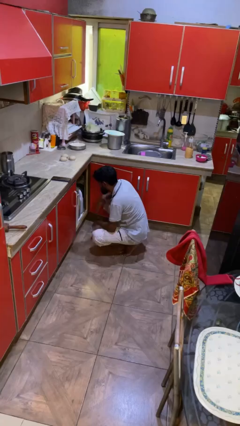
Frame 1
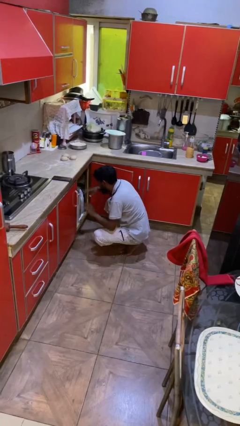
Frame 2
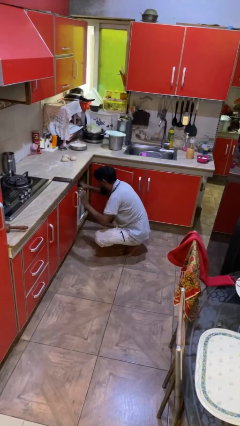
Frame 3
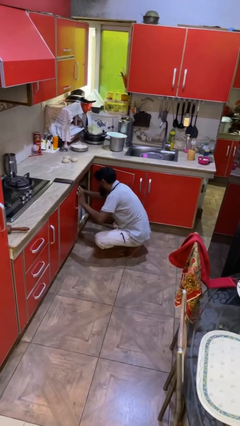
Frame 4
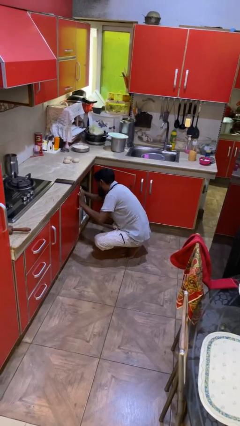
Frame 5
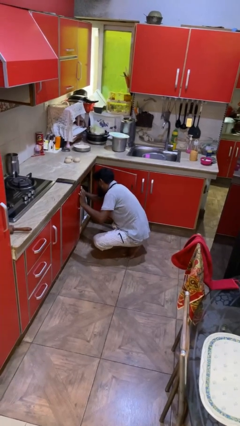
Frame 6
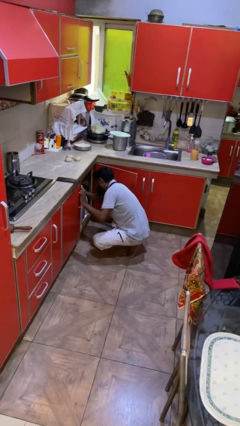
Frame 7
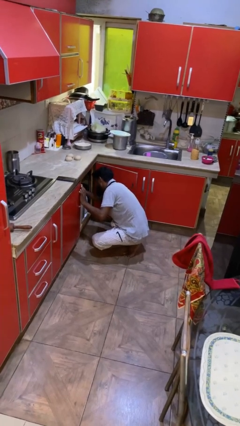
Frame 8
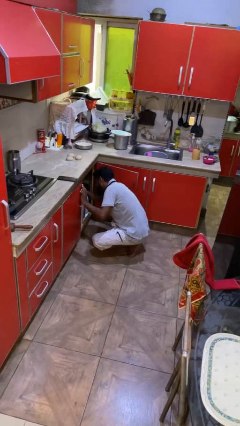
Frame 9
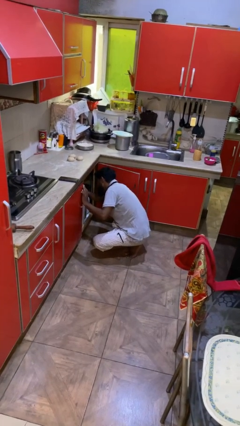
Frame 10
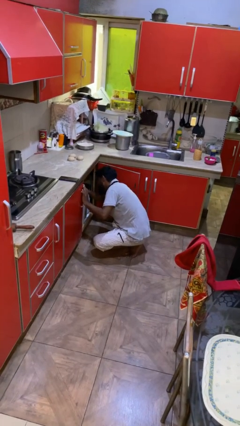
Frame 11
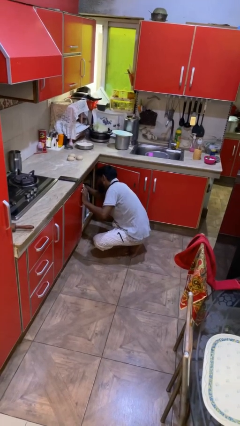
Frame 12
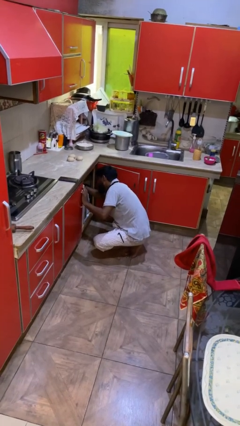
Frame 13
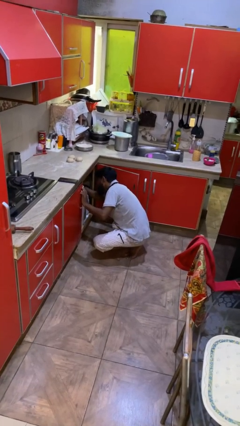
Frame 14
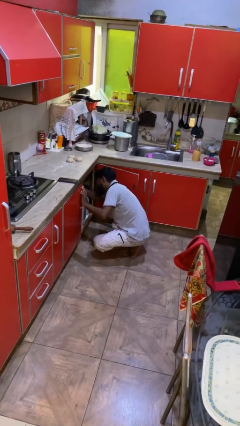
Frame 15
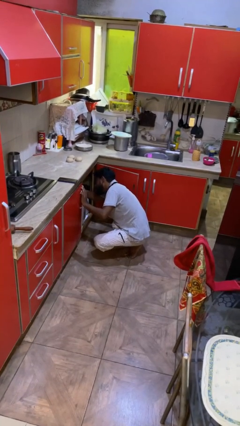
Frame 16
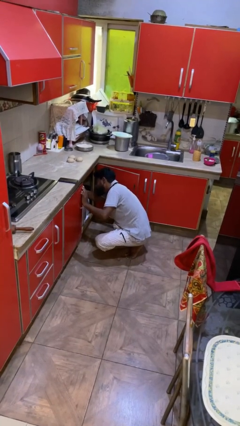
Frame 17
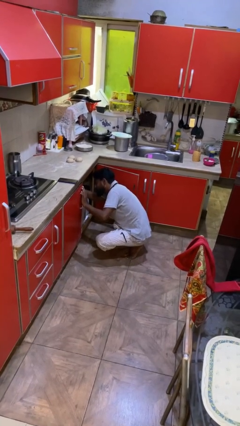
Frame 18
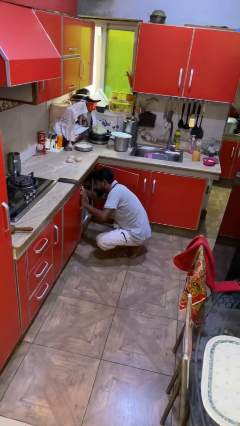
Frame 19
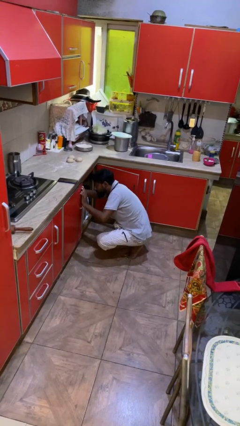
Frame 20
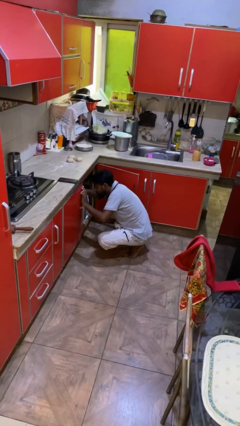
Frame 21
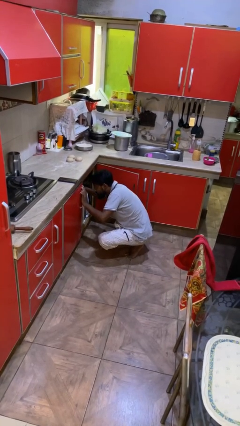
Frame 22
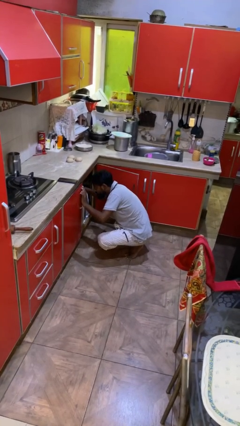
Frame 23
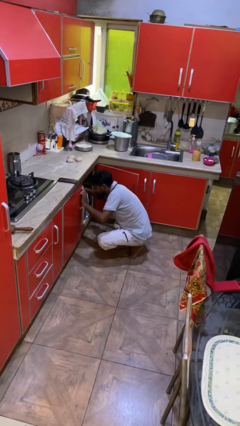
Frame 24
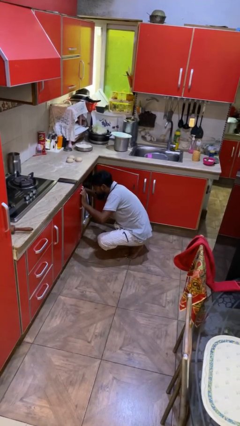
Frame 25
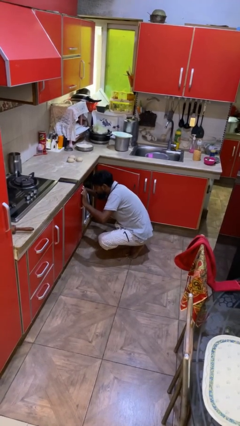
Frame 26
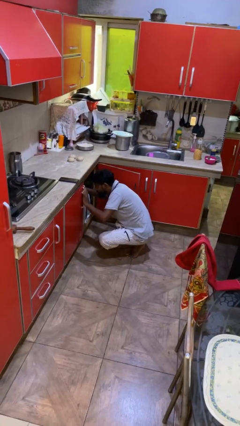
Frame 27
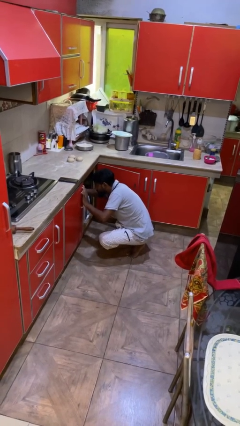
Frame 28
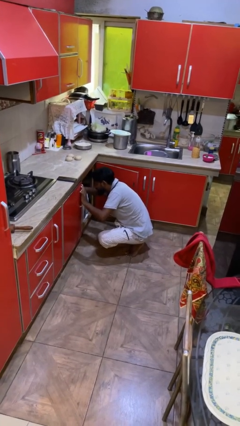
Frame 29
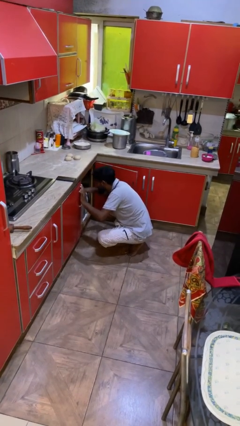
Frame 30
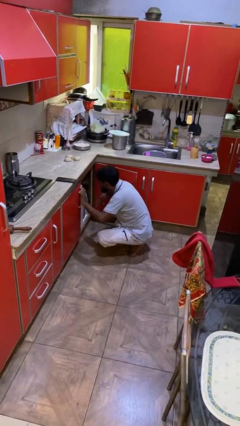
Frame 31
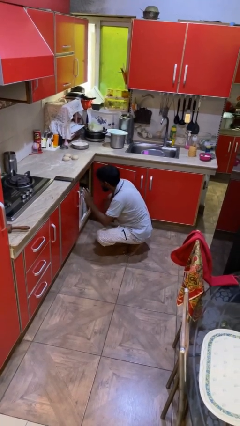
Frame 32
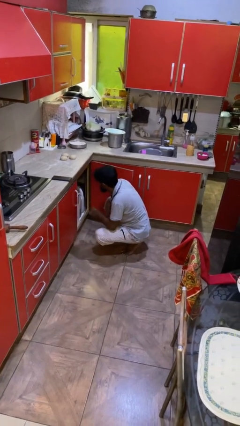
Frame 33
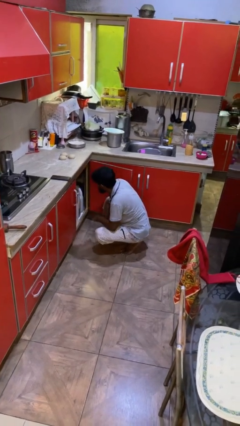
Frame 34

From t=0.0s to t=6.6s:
person searches in cabinet

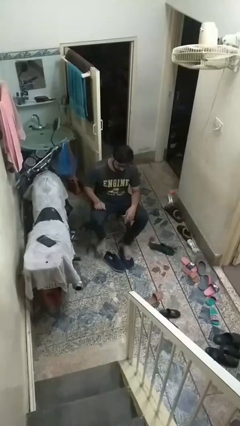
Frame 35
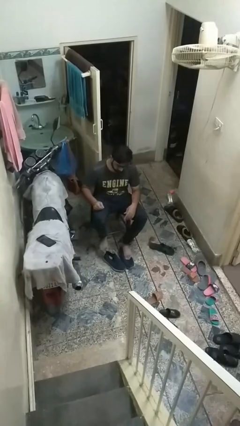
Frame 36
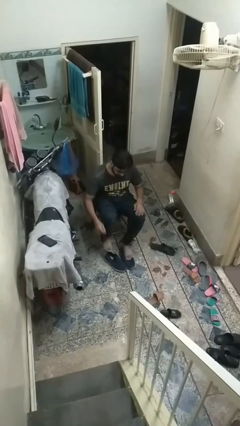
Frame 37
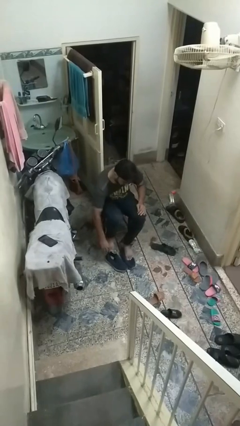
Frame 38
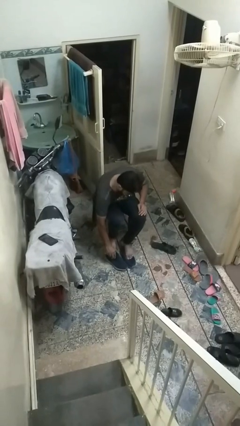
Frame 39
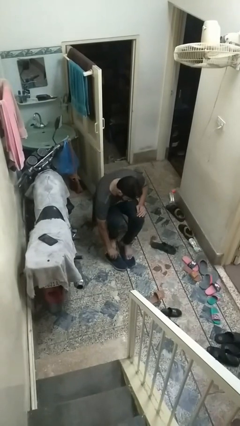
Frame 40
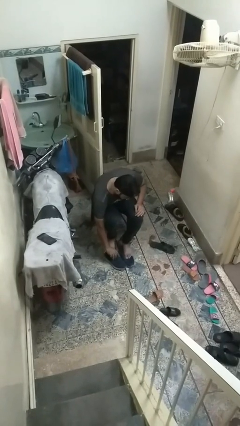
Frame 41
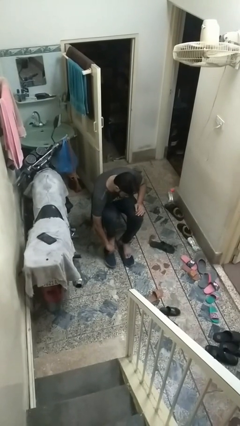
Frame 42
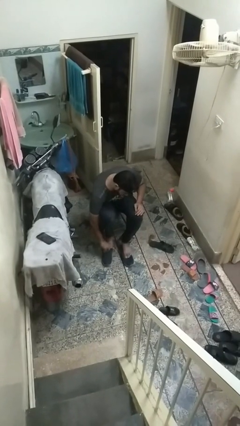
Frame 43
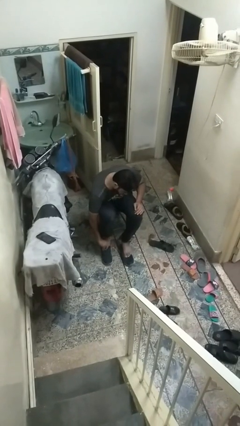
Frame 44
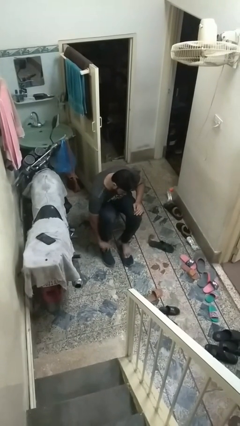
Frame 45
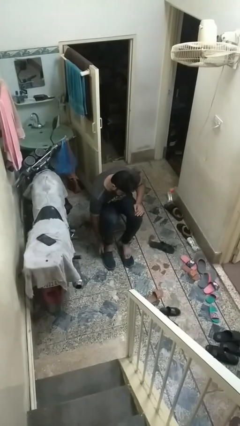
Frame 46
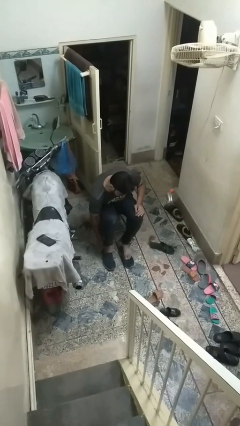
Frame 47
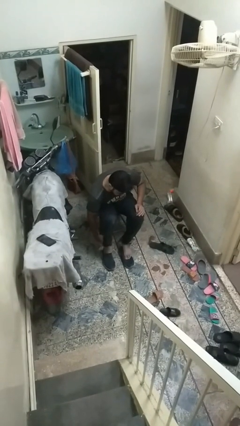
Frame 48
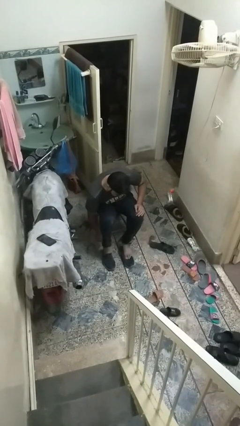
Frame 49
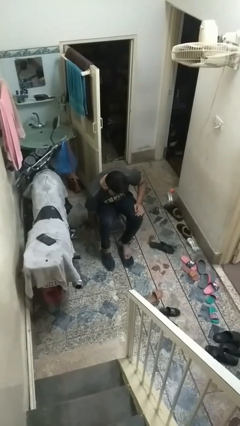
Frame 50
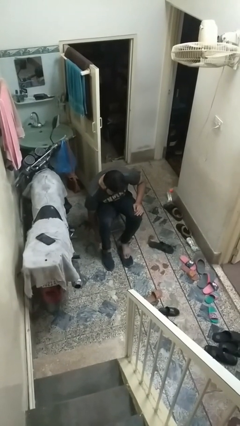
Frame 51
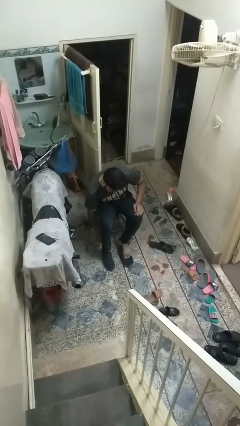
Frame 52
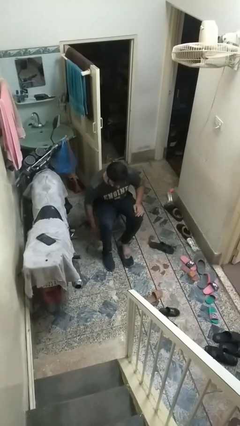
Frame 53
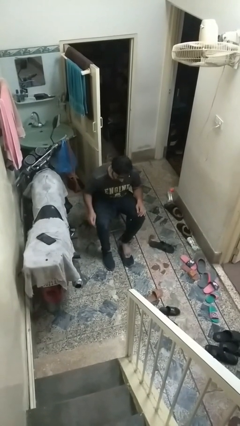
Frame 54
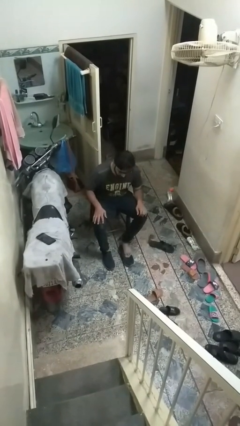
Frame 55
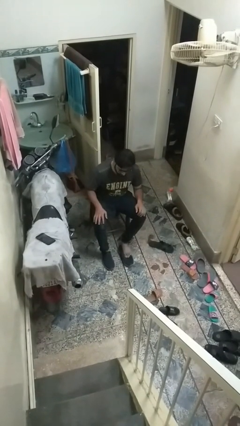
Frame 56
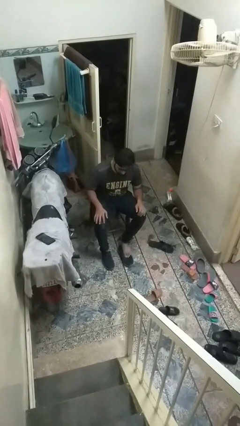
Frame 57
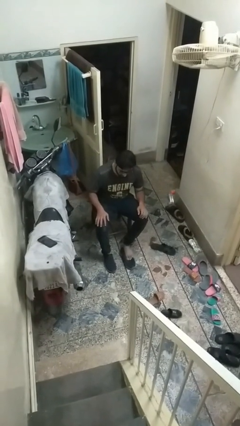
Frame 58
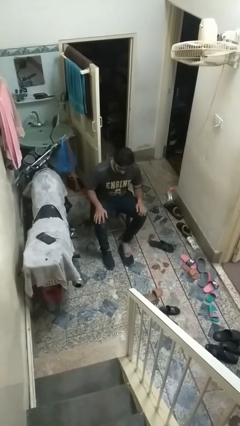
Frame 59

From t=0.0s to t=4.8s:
person puts on shoes

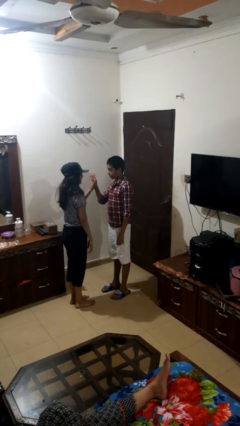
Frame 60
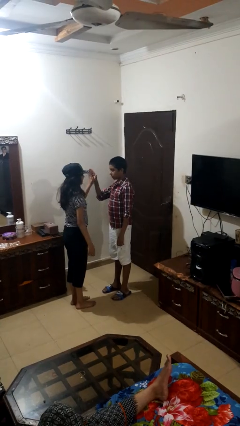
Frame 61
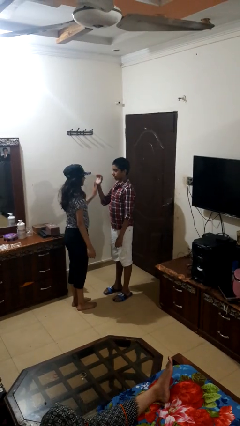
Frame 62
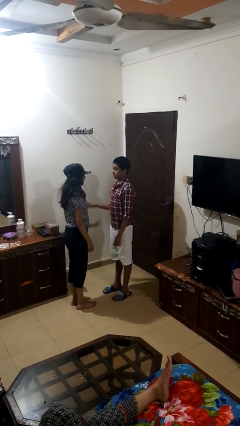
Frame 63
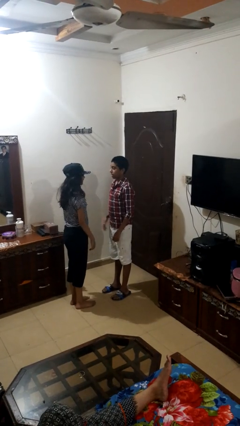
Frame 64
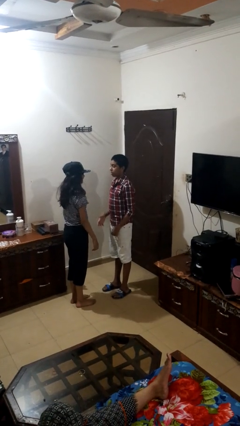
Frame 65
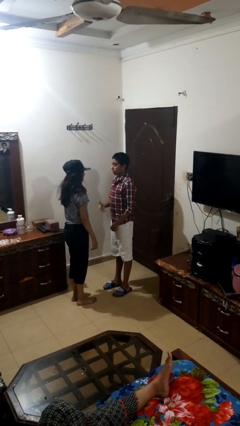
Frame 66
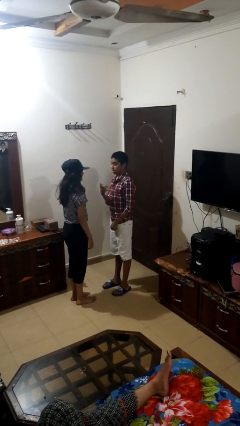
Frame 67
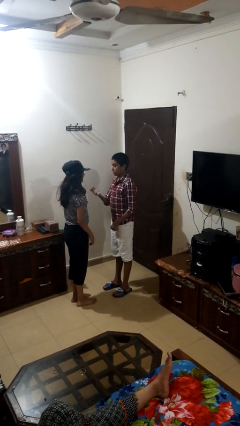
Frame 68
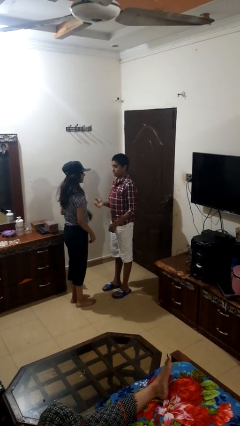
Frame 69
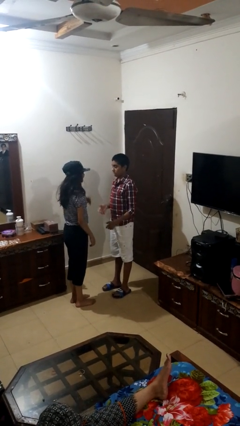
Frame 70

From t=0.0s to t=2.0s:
person highfives hand

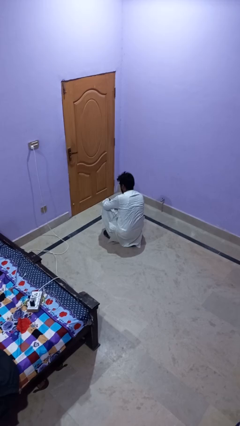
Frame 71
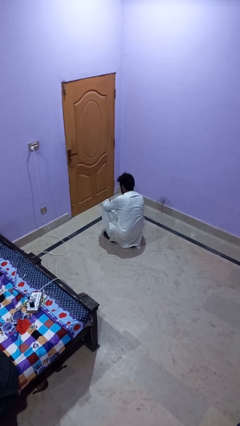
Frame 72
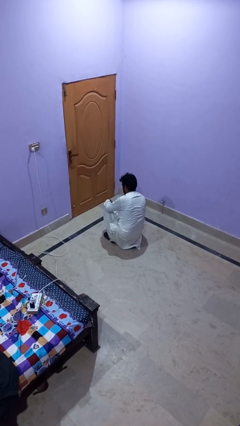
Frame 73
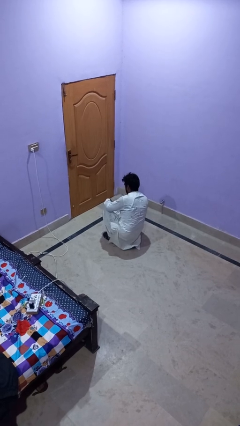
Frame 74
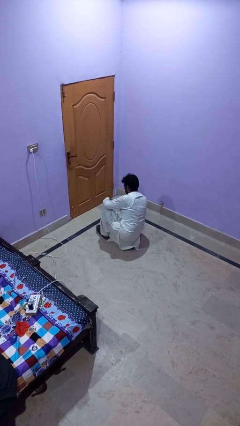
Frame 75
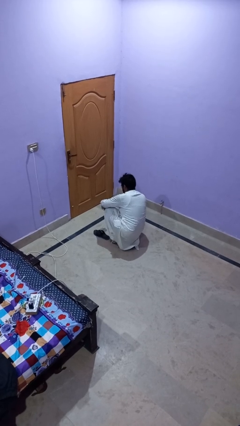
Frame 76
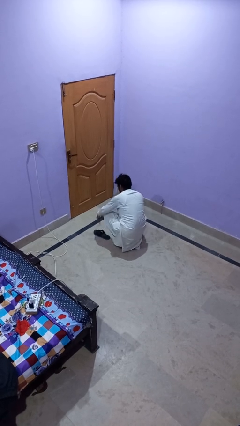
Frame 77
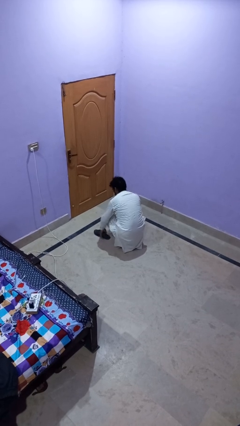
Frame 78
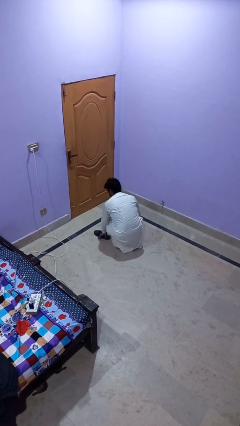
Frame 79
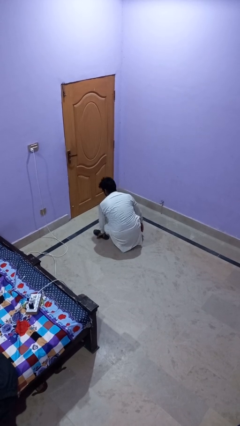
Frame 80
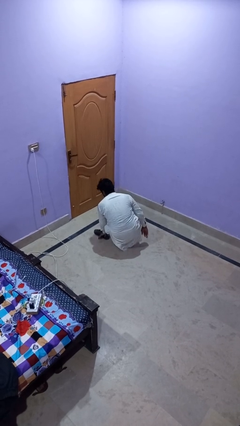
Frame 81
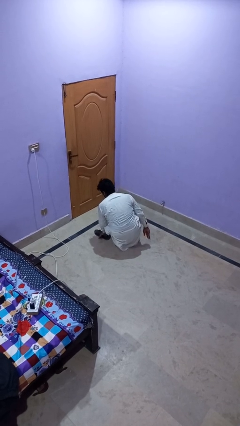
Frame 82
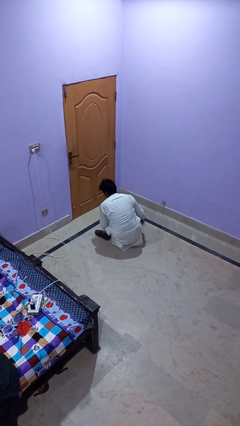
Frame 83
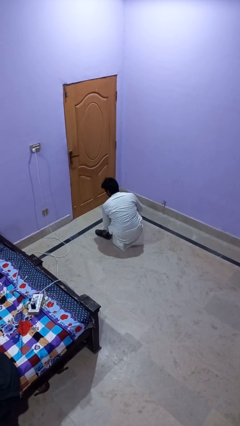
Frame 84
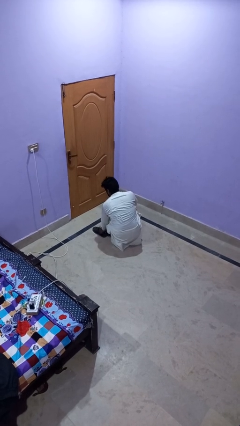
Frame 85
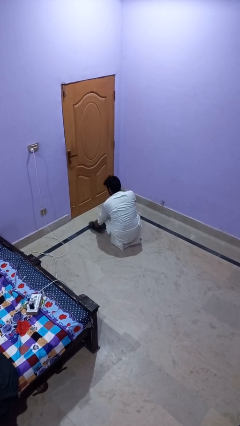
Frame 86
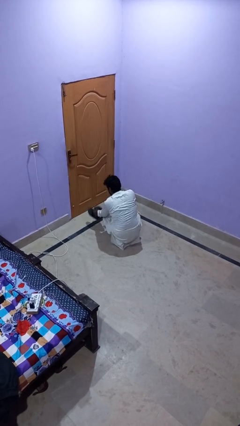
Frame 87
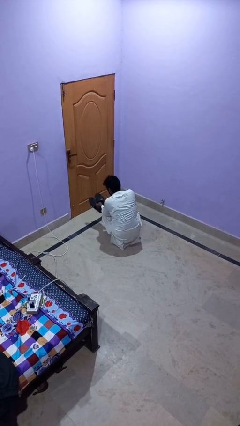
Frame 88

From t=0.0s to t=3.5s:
person takes off shoes

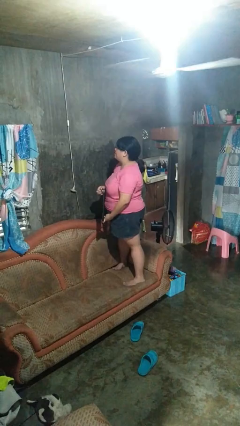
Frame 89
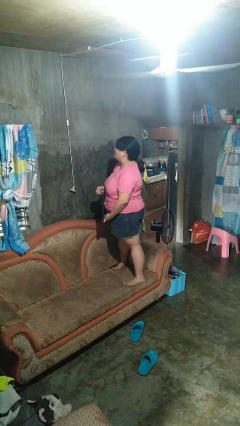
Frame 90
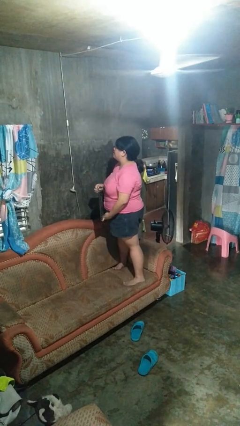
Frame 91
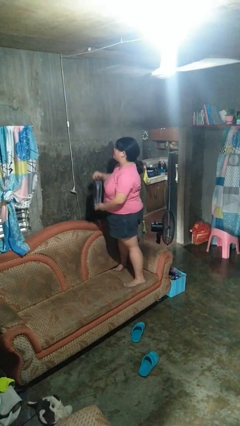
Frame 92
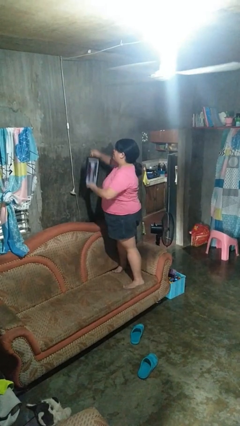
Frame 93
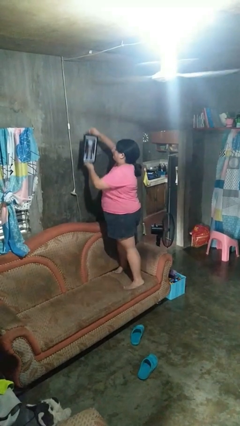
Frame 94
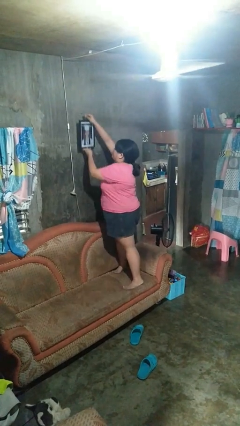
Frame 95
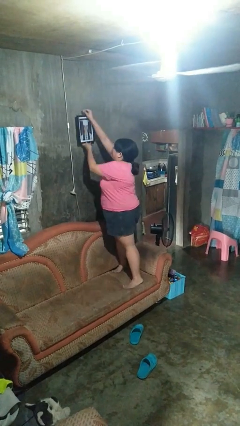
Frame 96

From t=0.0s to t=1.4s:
person puts up picture frame
